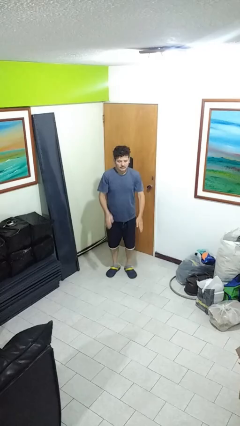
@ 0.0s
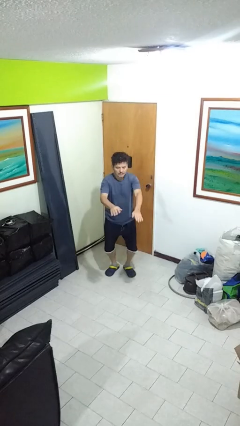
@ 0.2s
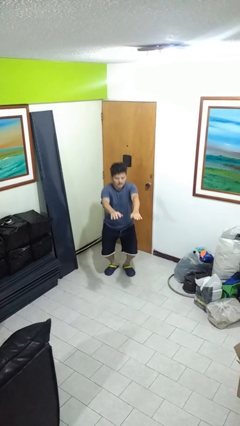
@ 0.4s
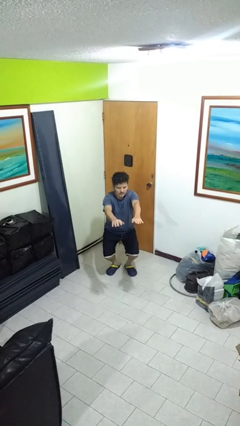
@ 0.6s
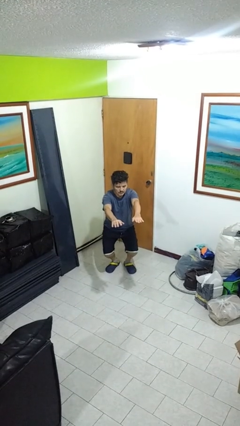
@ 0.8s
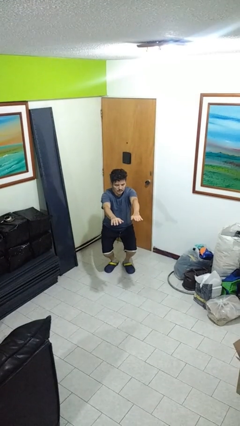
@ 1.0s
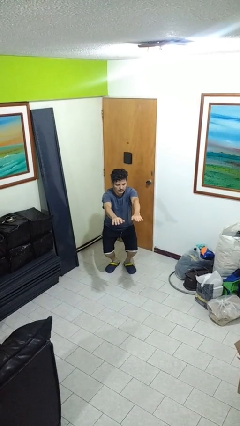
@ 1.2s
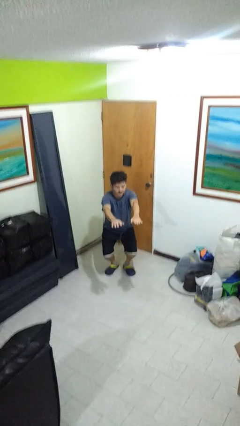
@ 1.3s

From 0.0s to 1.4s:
person squats

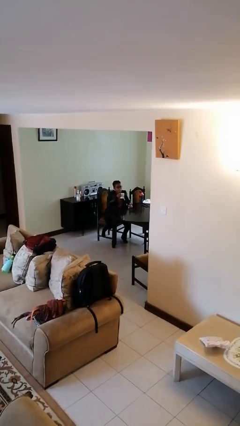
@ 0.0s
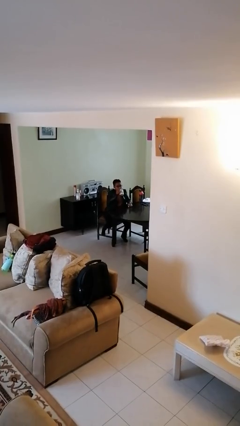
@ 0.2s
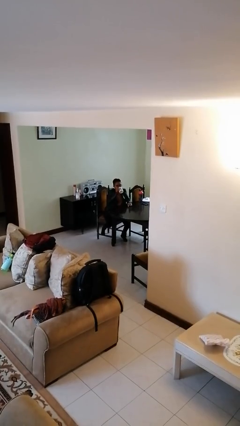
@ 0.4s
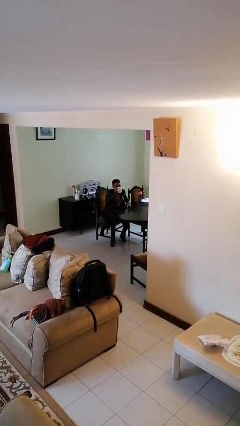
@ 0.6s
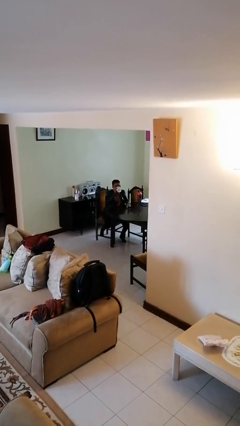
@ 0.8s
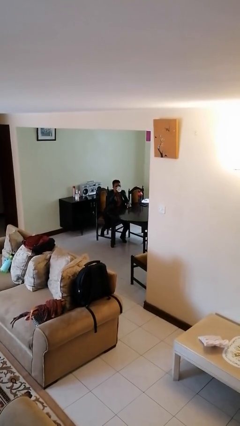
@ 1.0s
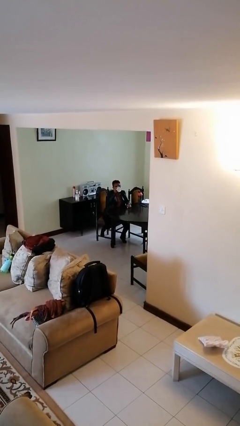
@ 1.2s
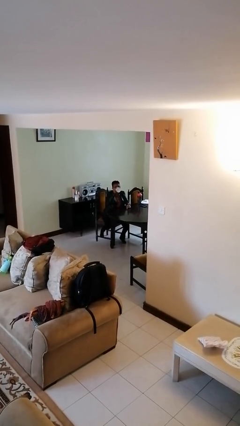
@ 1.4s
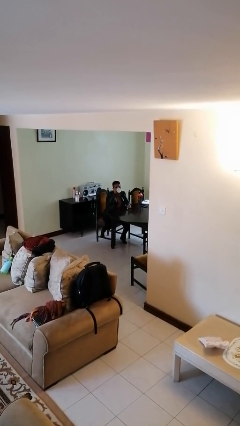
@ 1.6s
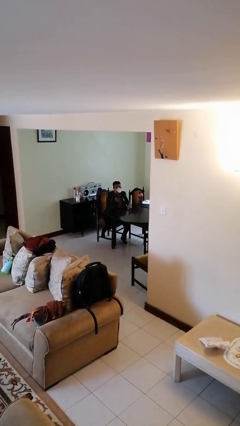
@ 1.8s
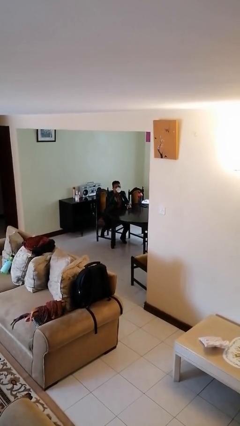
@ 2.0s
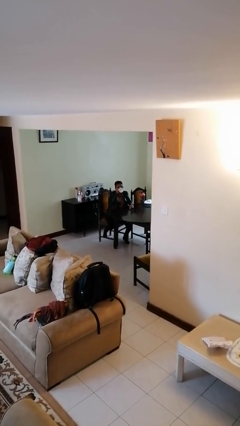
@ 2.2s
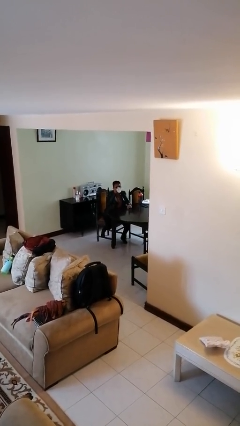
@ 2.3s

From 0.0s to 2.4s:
person drinks from mug

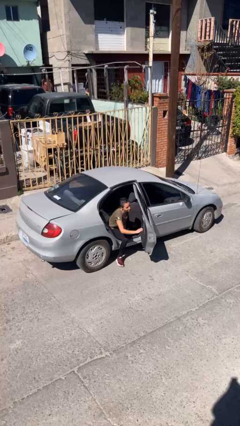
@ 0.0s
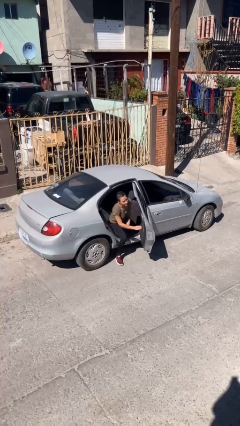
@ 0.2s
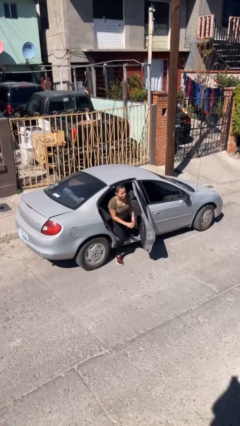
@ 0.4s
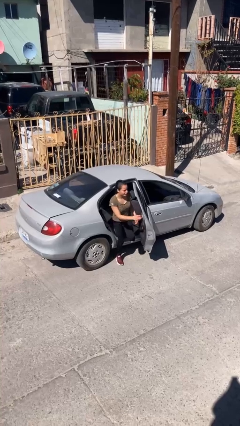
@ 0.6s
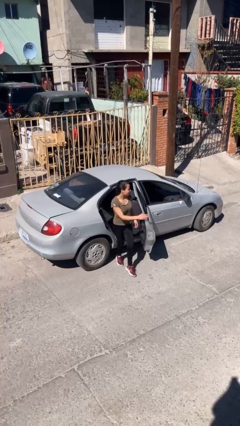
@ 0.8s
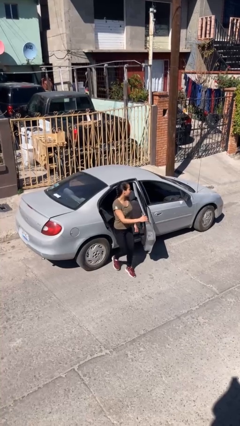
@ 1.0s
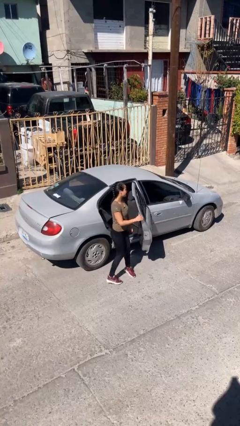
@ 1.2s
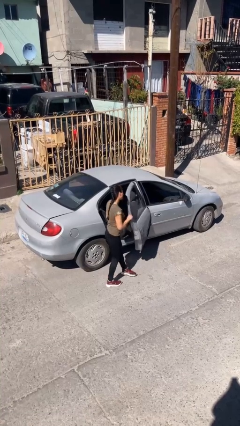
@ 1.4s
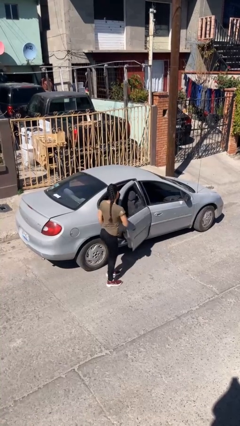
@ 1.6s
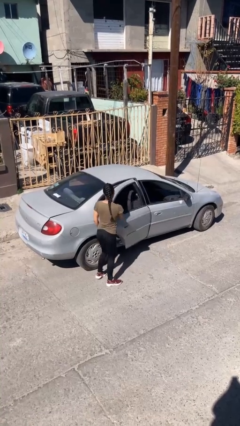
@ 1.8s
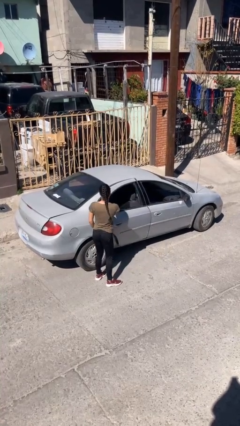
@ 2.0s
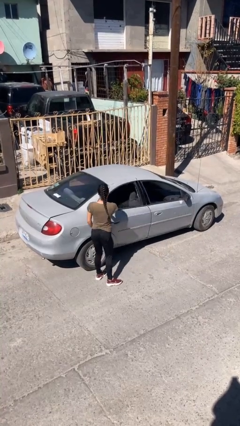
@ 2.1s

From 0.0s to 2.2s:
car drops off person

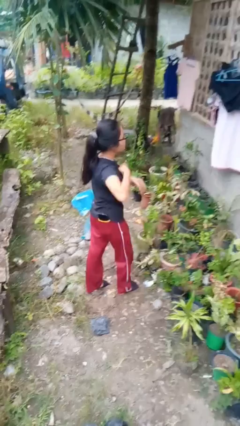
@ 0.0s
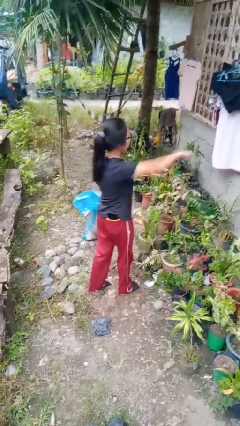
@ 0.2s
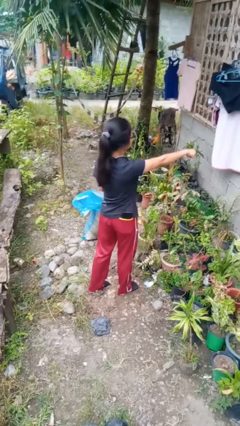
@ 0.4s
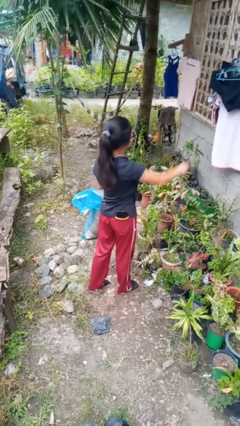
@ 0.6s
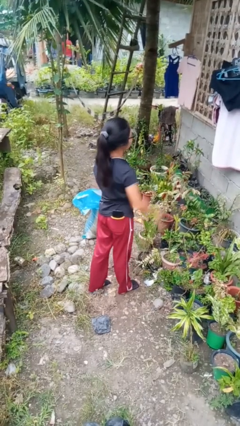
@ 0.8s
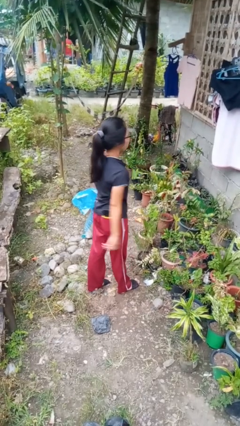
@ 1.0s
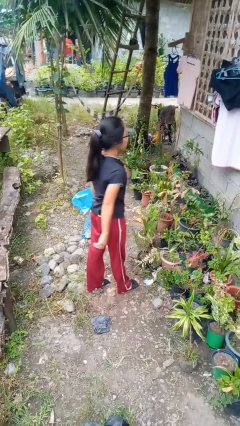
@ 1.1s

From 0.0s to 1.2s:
person punches

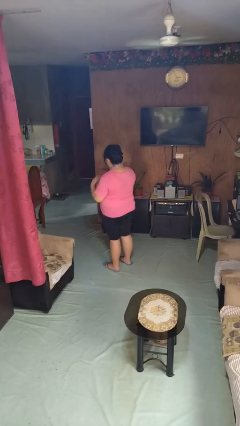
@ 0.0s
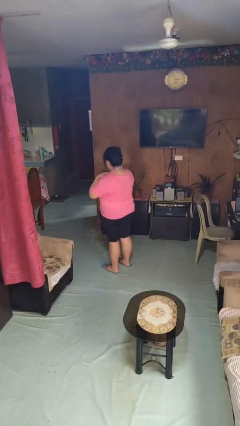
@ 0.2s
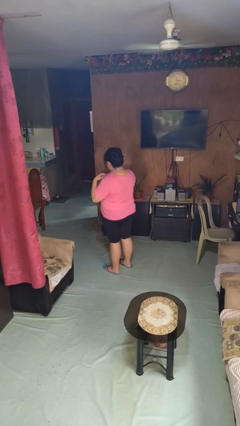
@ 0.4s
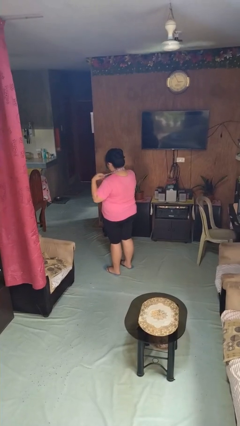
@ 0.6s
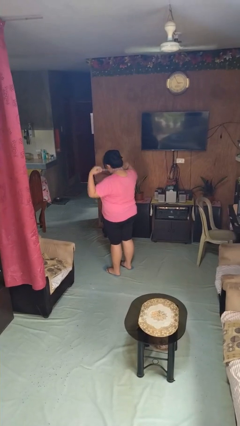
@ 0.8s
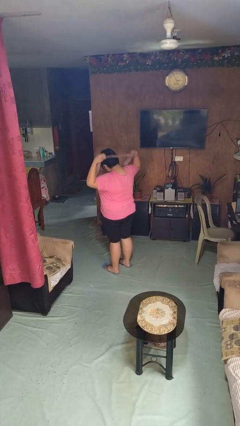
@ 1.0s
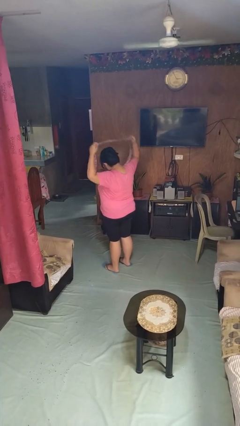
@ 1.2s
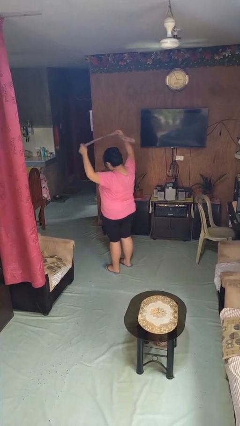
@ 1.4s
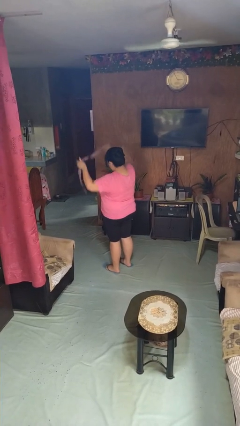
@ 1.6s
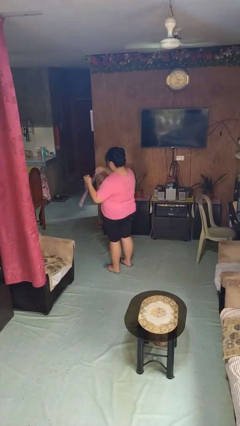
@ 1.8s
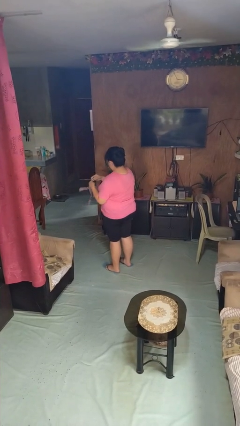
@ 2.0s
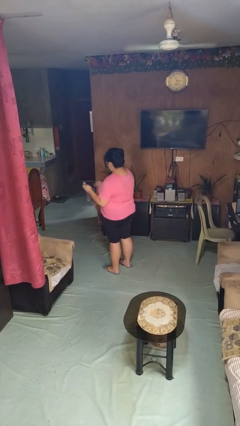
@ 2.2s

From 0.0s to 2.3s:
person takes off necktie

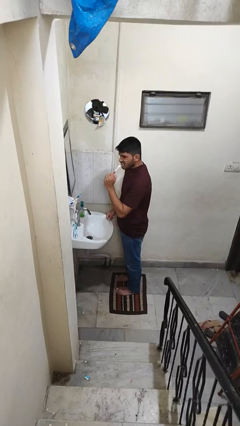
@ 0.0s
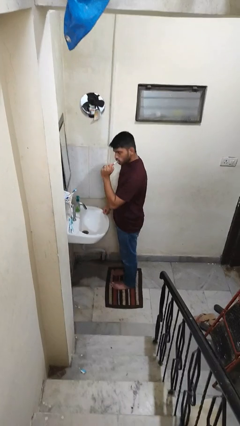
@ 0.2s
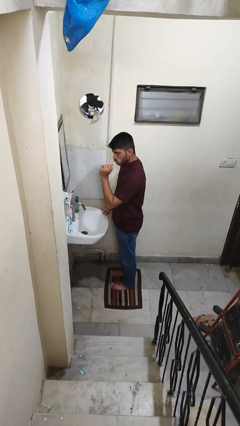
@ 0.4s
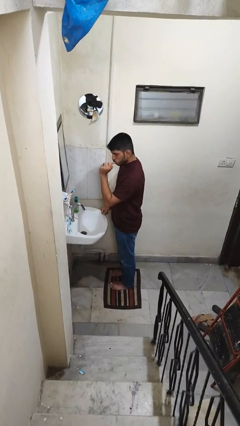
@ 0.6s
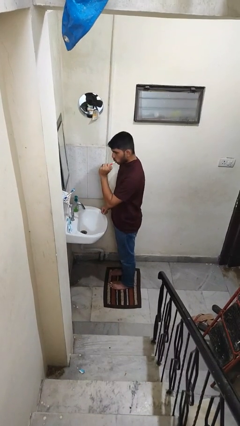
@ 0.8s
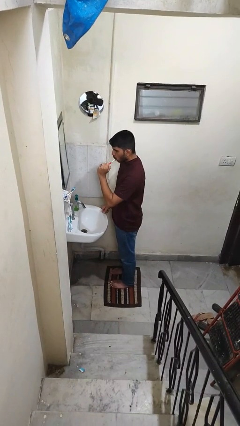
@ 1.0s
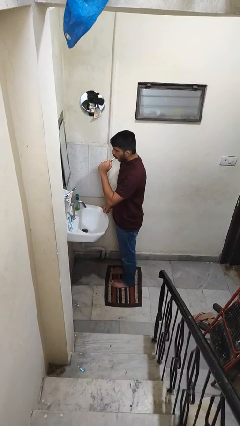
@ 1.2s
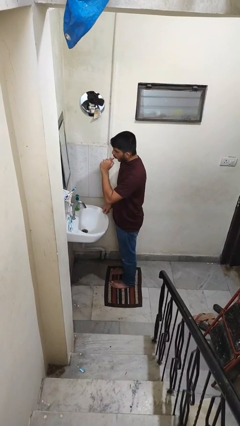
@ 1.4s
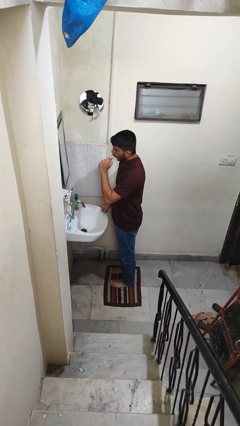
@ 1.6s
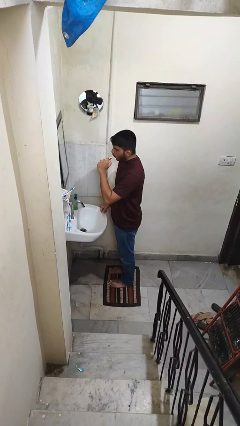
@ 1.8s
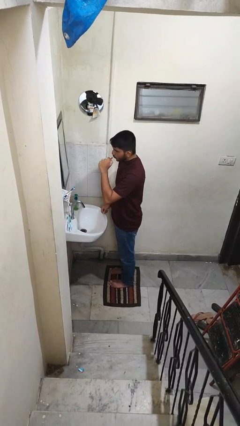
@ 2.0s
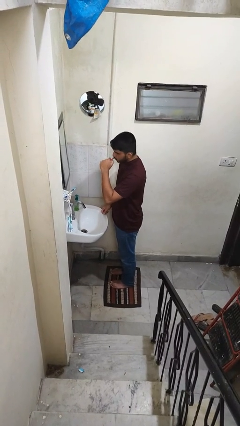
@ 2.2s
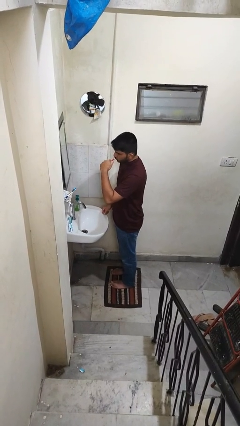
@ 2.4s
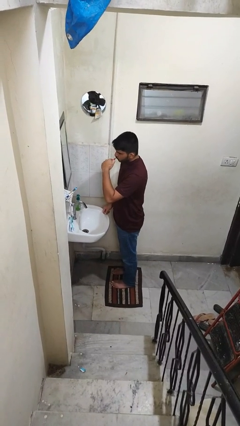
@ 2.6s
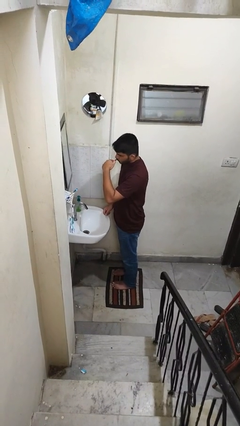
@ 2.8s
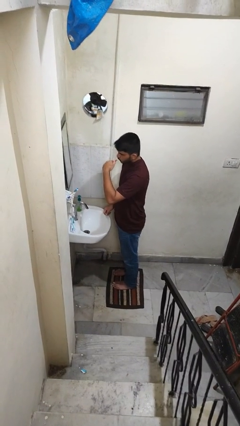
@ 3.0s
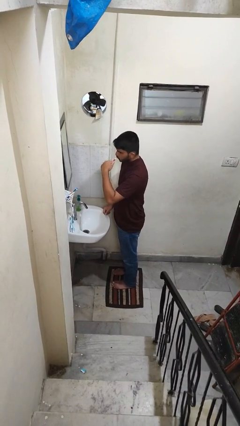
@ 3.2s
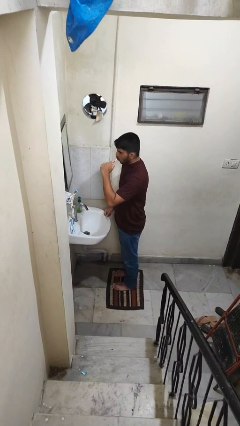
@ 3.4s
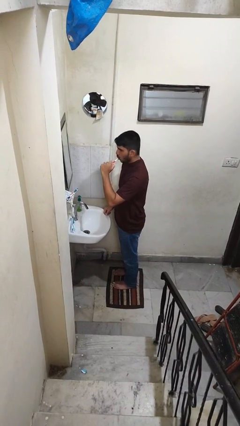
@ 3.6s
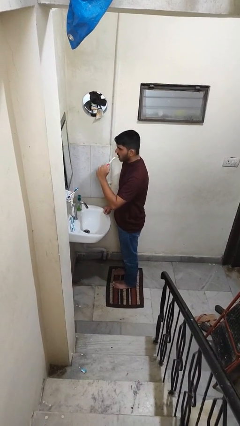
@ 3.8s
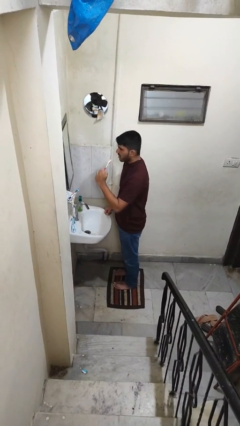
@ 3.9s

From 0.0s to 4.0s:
person brushes teeth

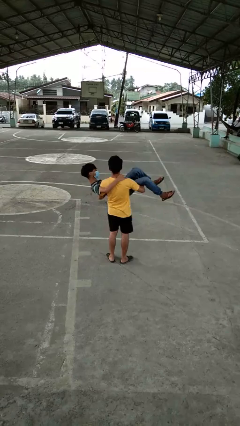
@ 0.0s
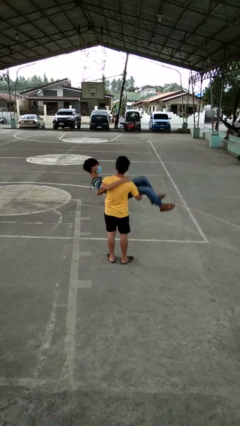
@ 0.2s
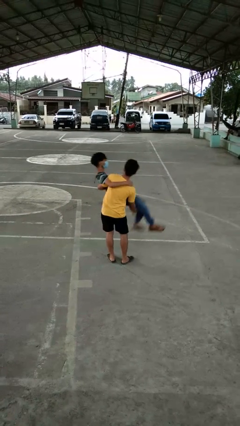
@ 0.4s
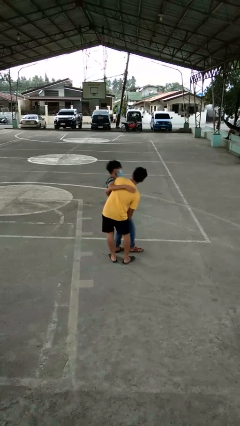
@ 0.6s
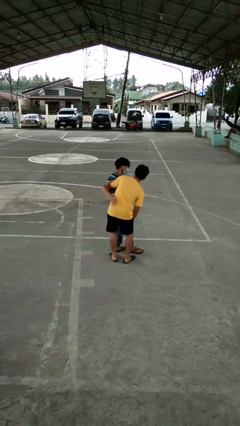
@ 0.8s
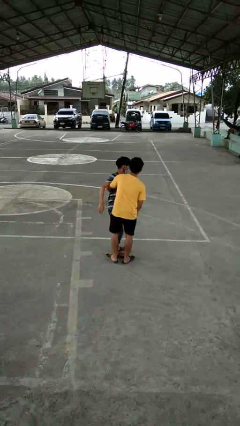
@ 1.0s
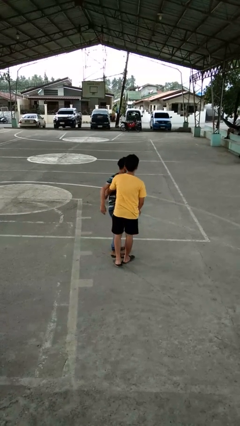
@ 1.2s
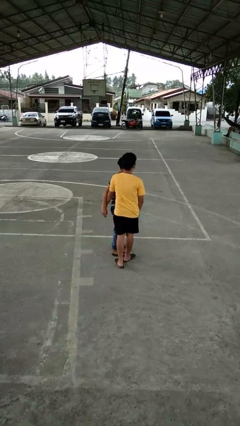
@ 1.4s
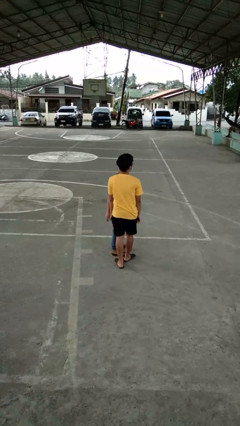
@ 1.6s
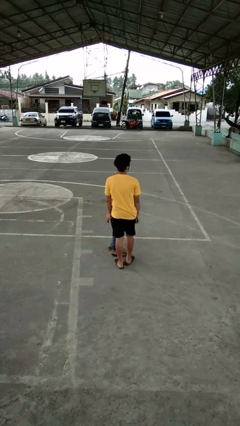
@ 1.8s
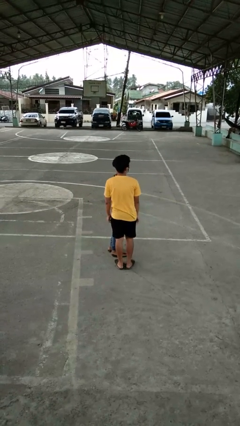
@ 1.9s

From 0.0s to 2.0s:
person puts down person

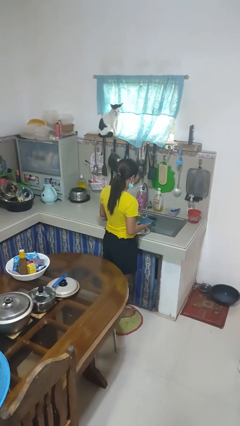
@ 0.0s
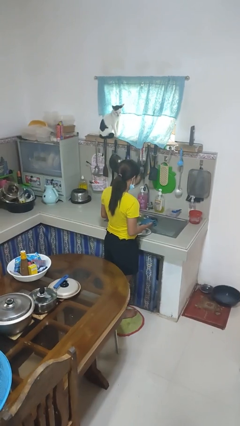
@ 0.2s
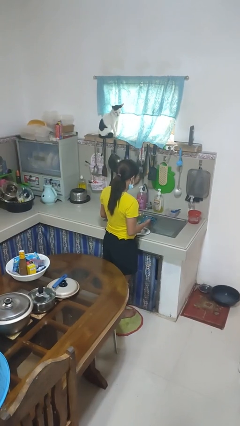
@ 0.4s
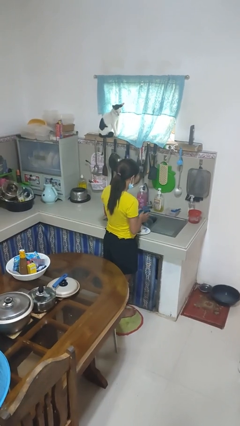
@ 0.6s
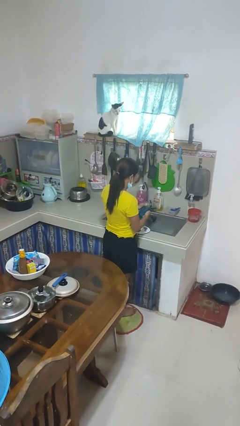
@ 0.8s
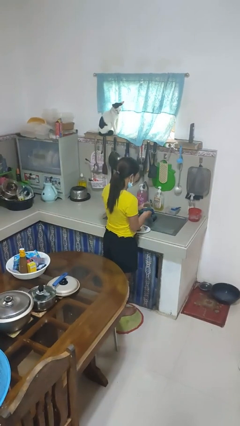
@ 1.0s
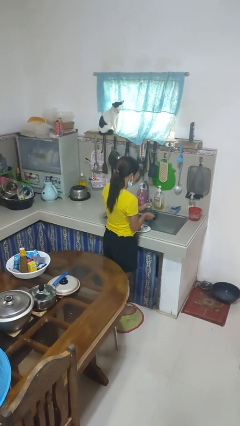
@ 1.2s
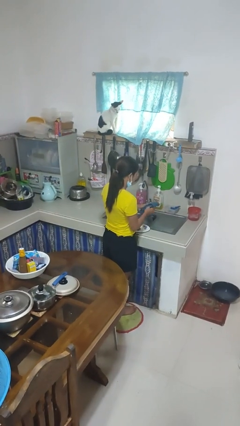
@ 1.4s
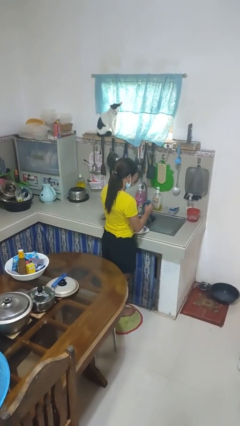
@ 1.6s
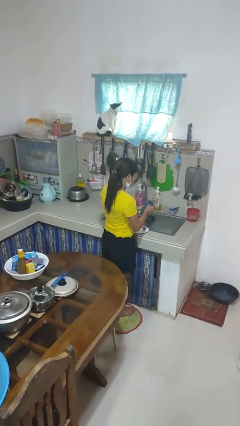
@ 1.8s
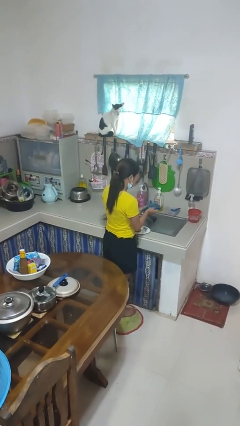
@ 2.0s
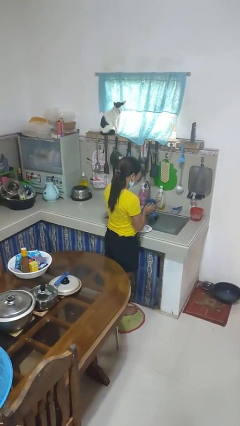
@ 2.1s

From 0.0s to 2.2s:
person dries dish
